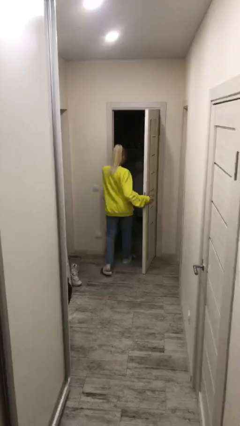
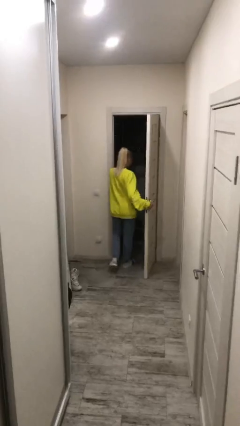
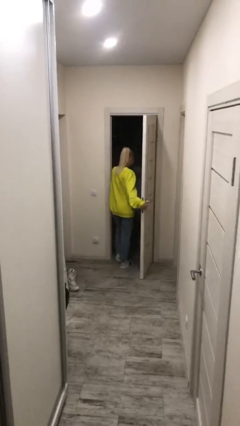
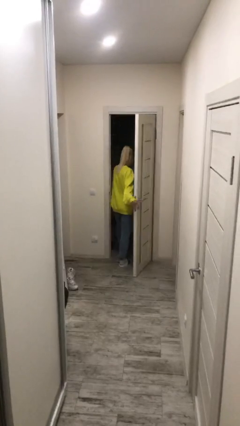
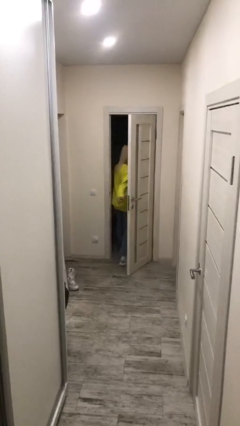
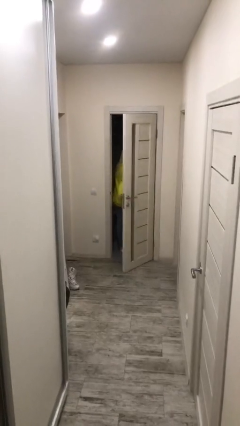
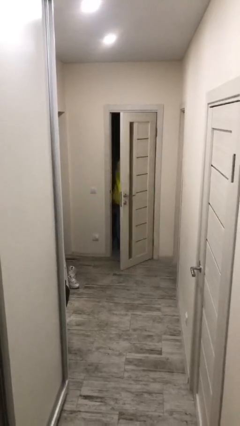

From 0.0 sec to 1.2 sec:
person exits scene through structure

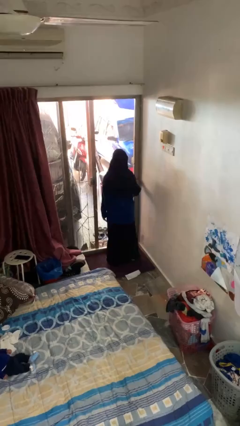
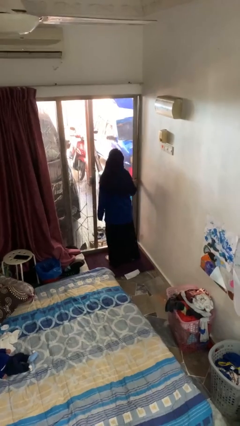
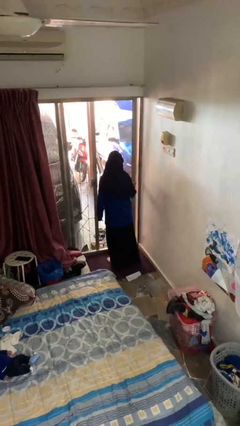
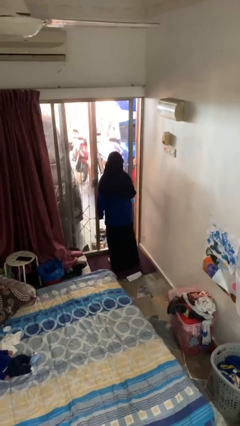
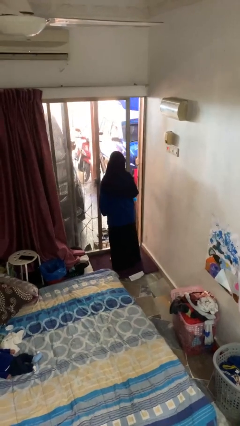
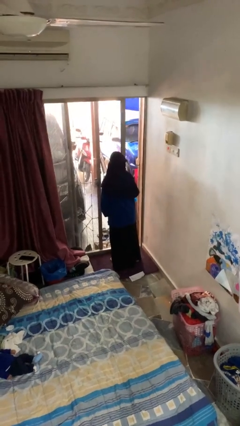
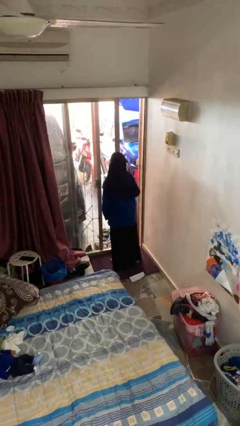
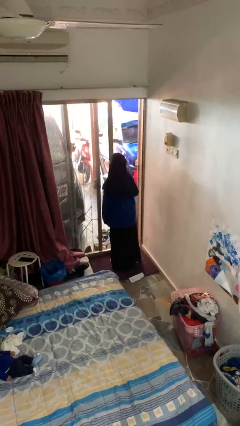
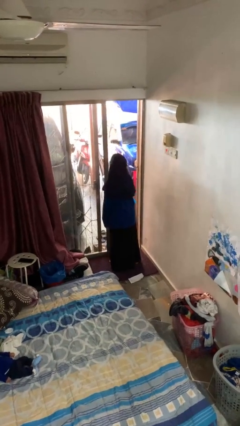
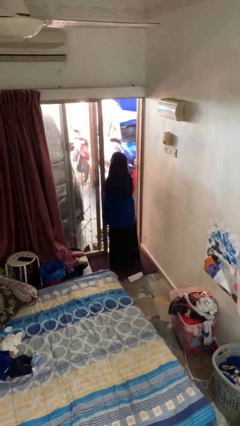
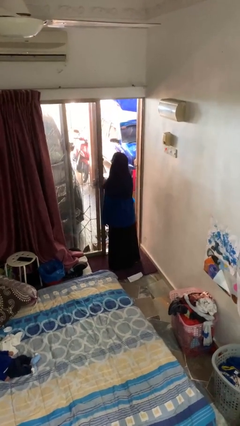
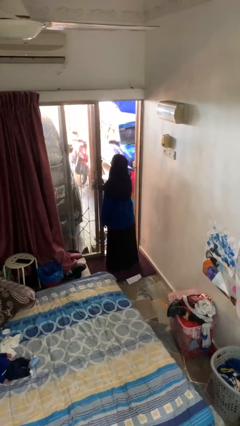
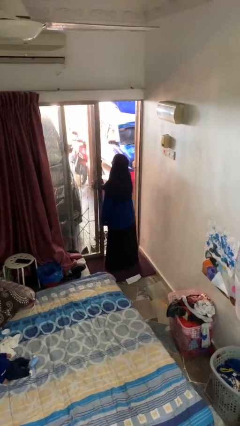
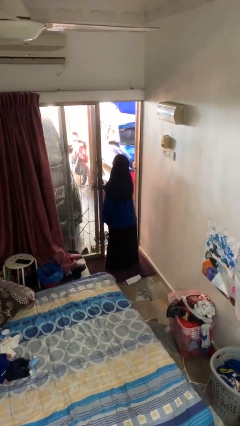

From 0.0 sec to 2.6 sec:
person opens sliding door

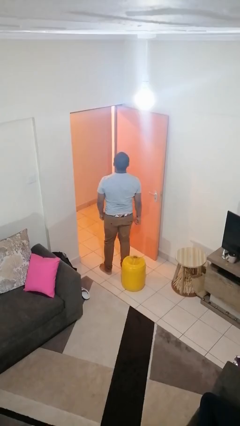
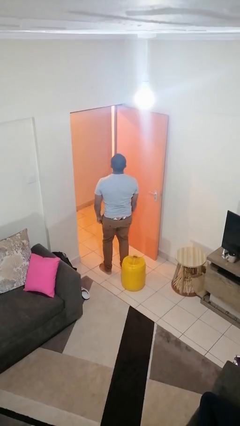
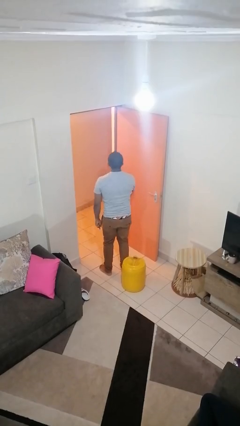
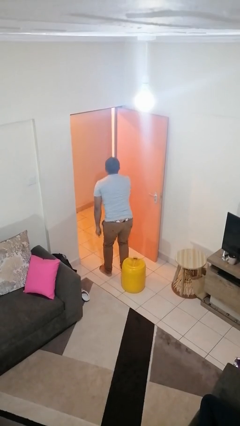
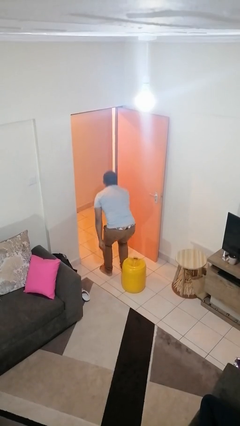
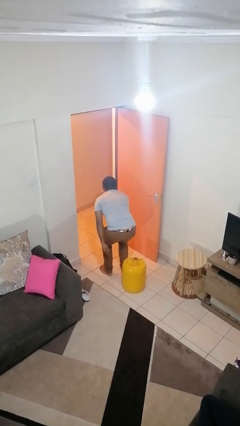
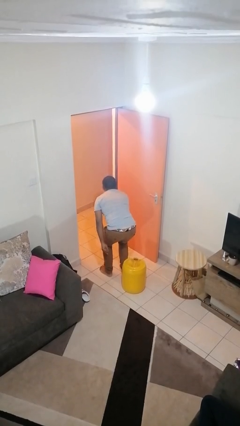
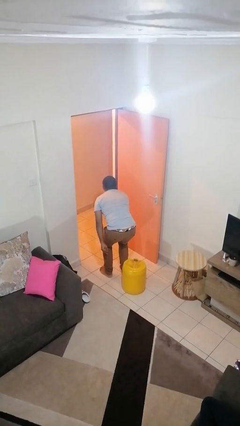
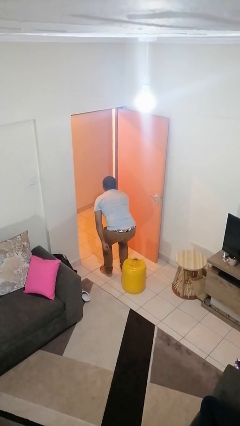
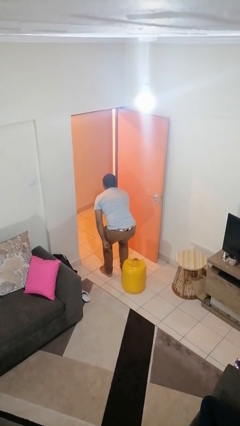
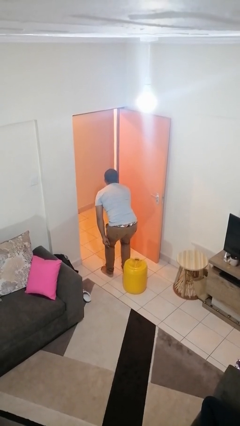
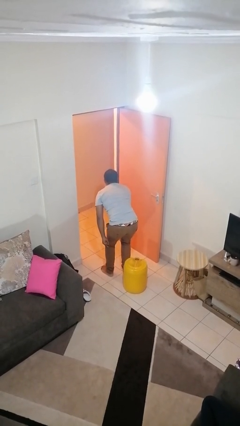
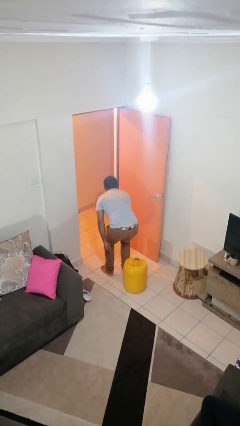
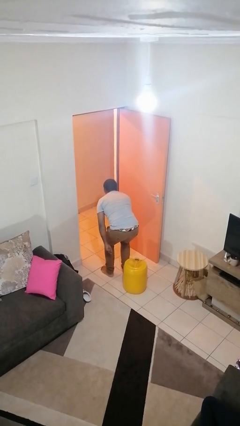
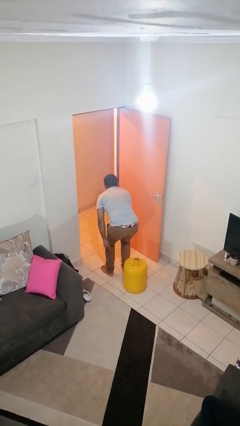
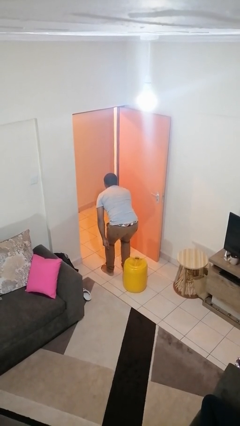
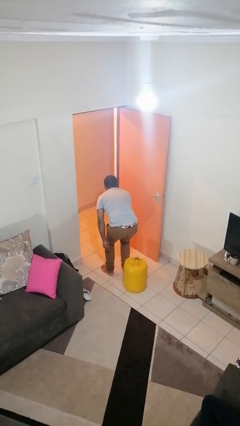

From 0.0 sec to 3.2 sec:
person gestures be quiet

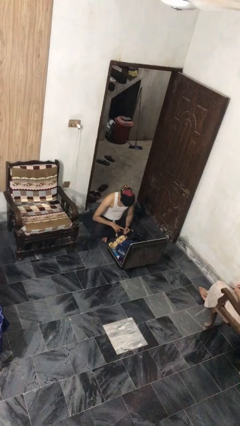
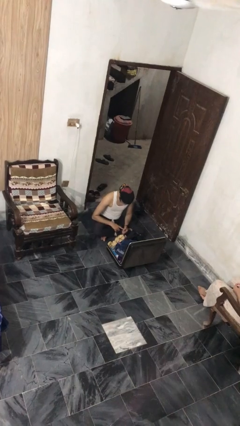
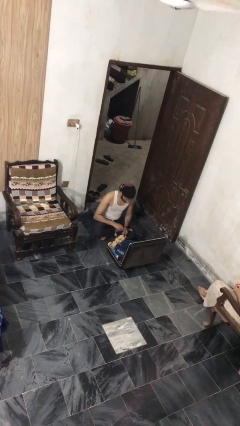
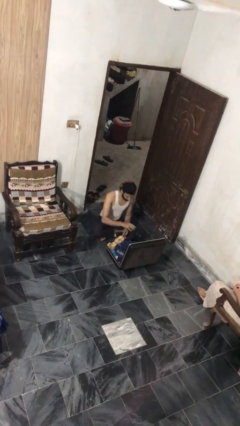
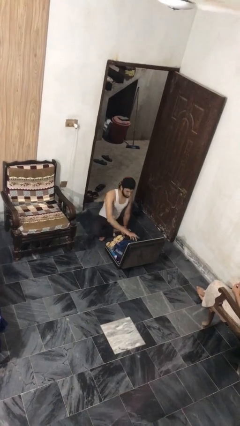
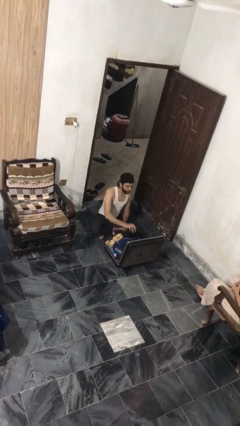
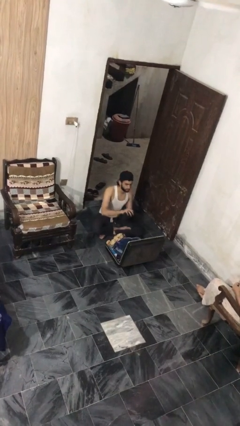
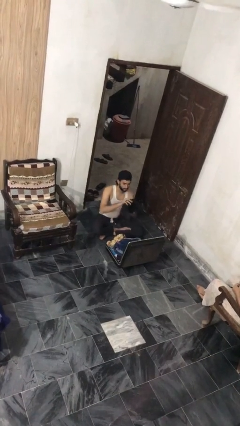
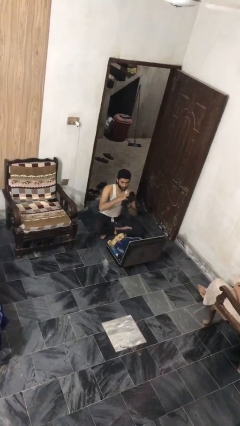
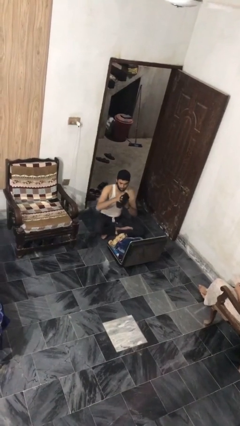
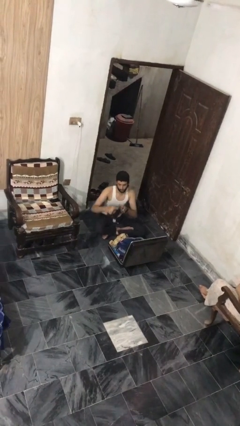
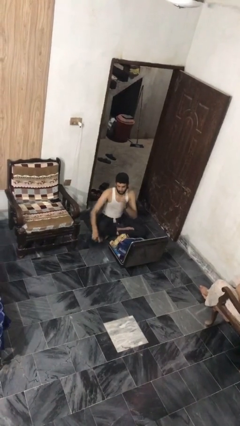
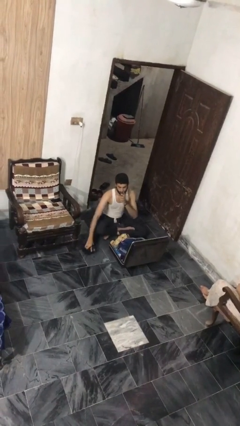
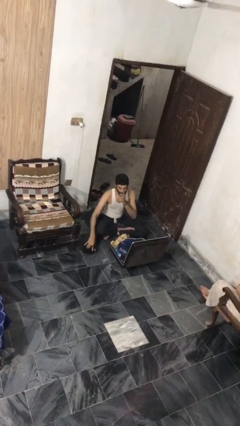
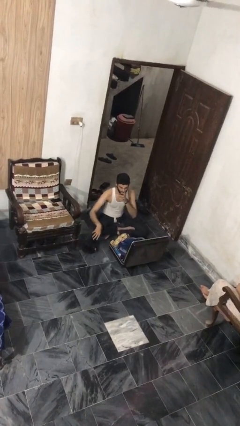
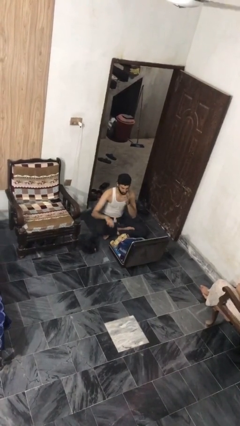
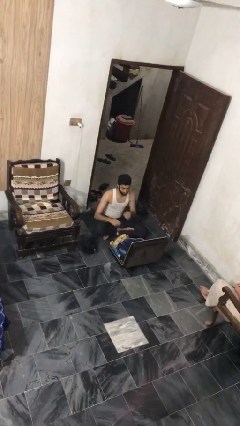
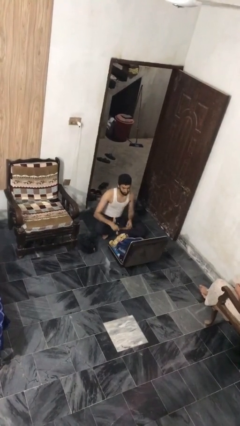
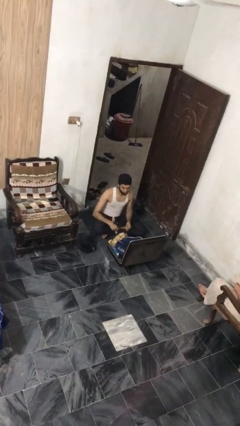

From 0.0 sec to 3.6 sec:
person unloads clothes from suitcase

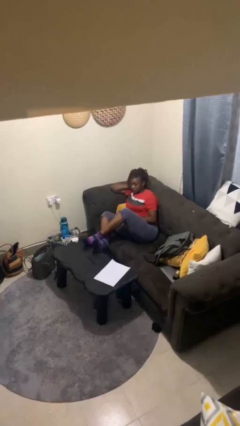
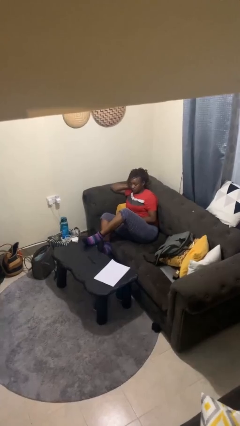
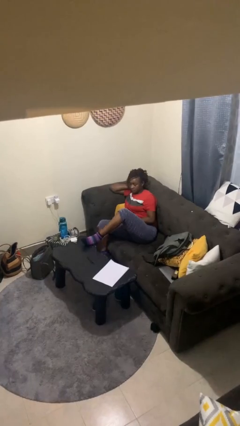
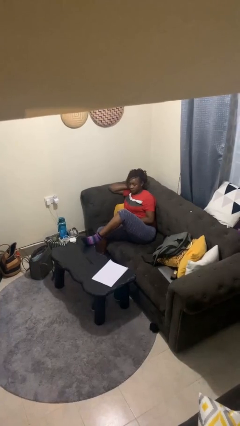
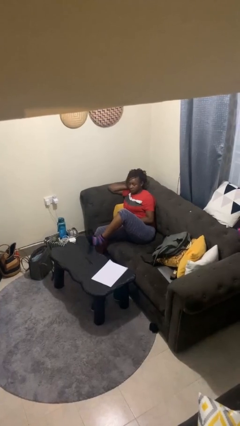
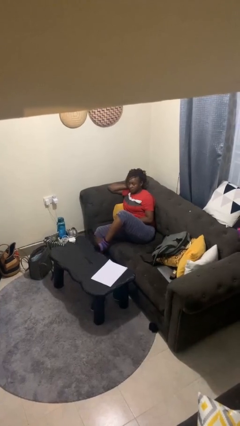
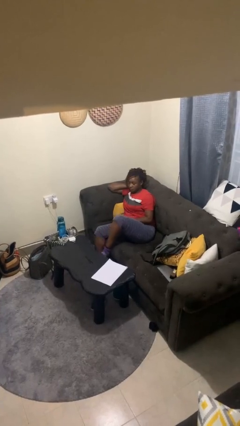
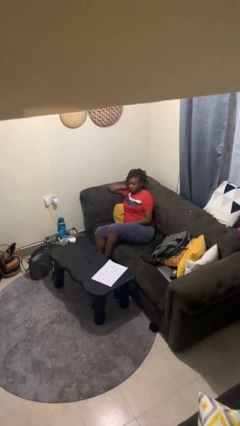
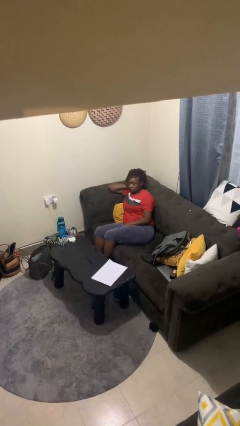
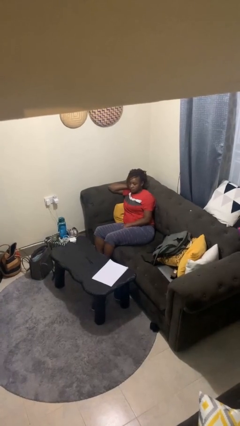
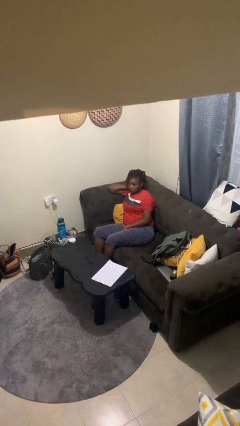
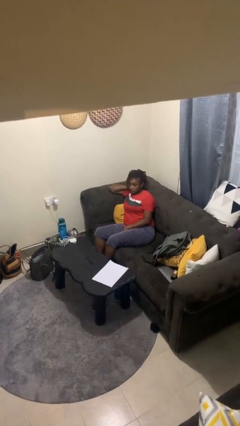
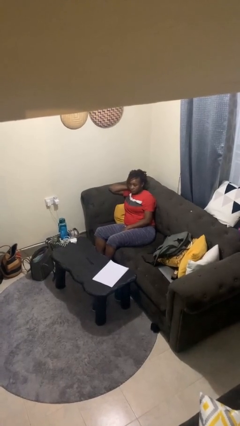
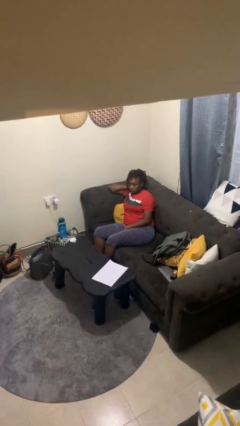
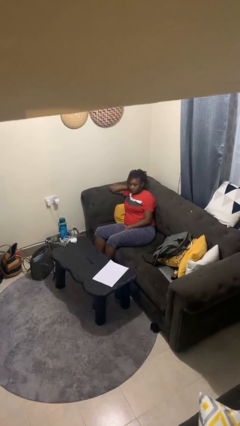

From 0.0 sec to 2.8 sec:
person puts feet up

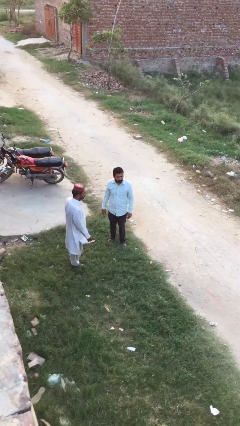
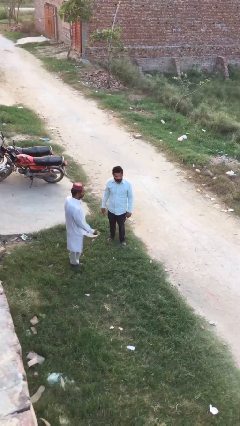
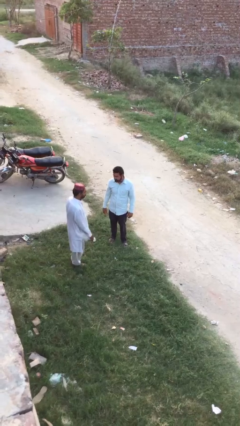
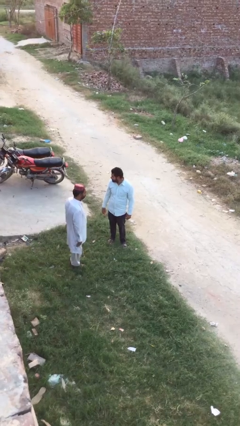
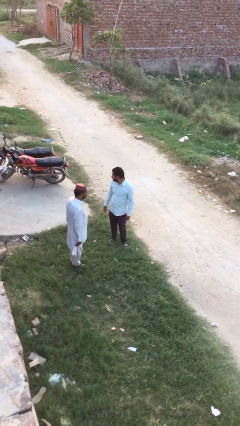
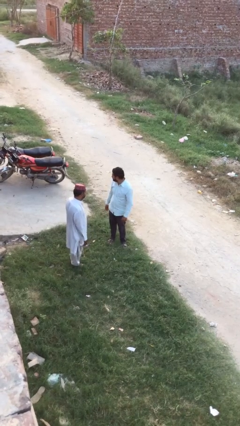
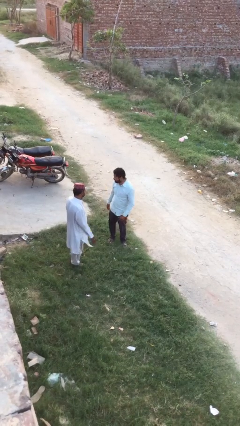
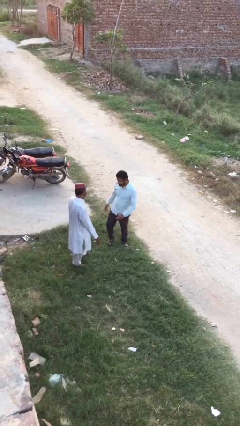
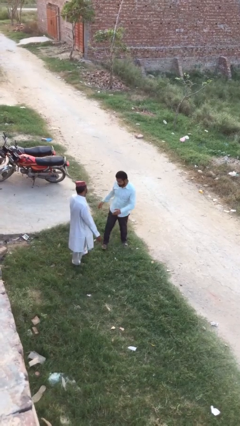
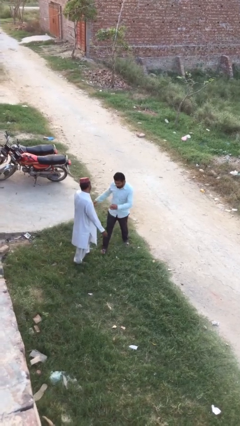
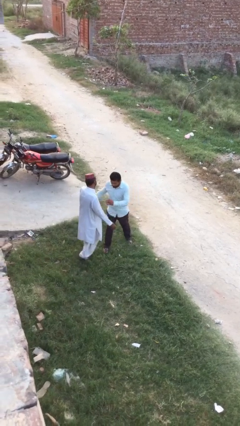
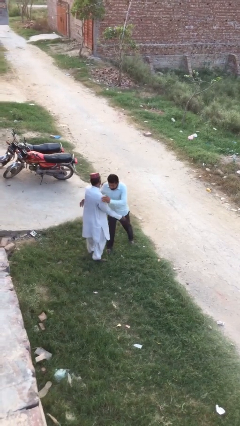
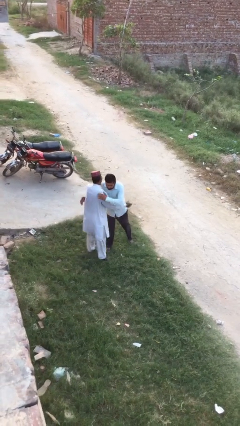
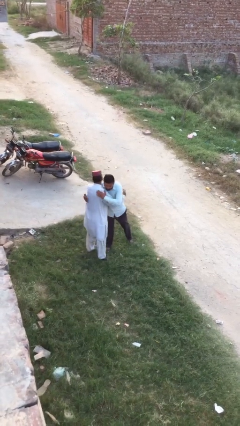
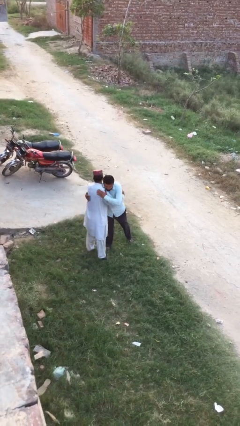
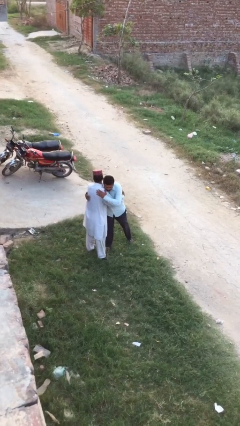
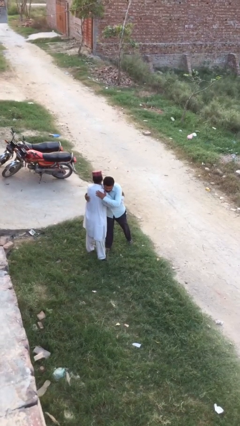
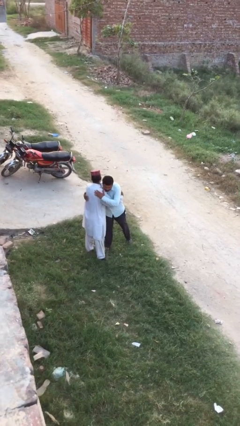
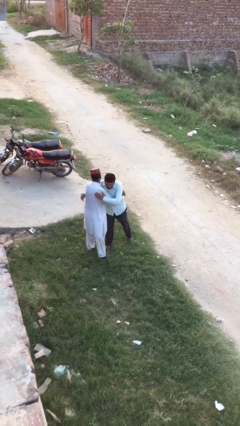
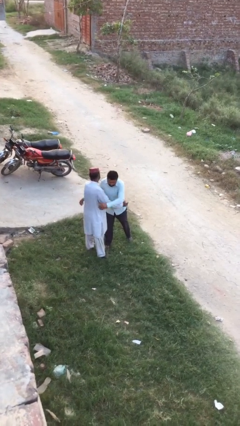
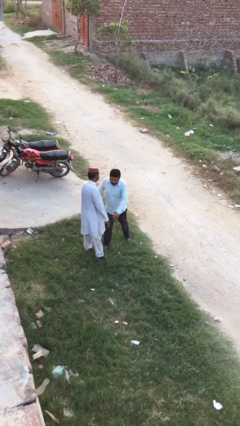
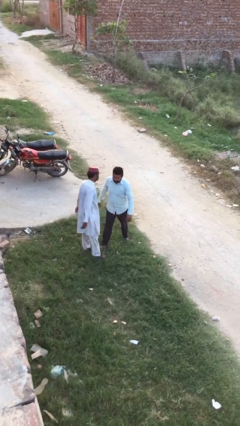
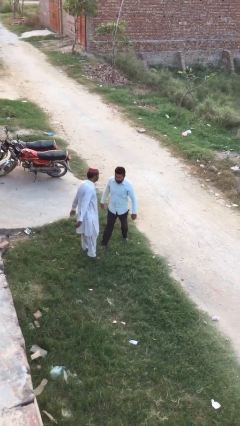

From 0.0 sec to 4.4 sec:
person embraces person
